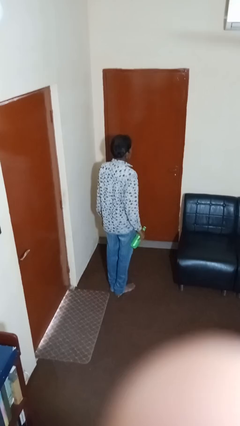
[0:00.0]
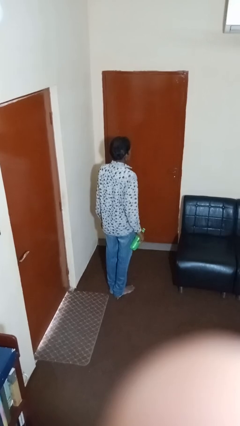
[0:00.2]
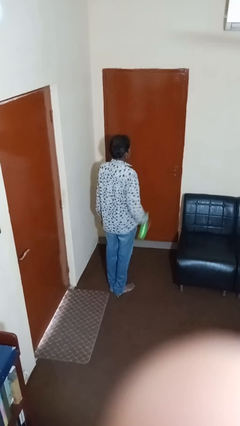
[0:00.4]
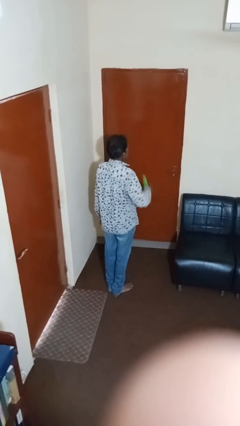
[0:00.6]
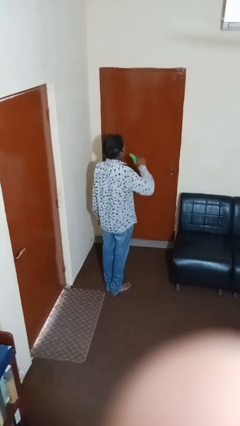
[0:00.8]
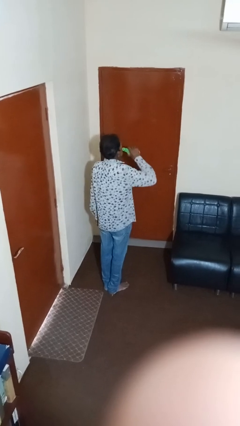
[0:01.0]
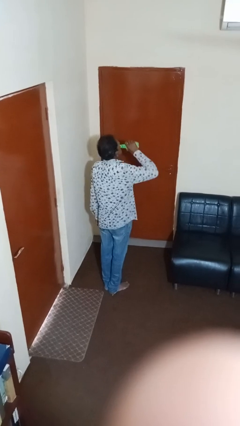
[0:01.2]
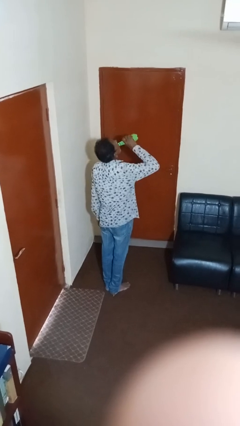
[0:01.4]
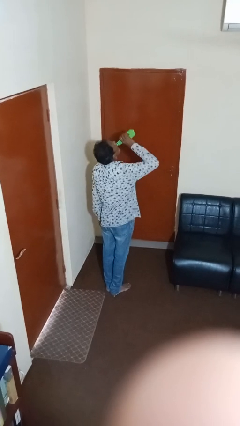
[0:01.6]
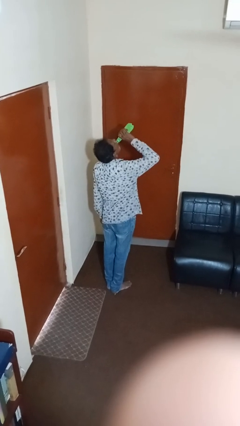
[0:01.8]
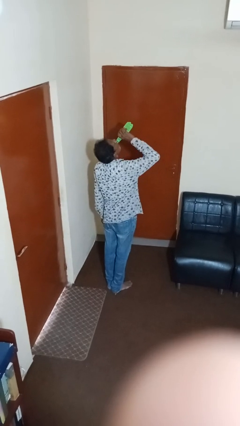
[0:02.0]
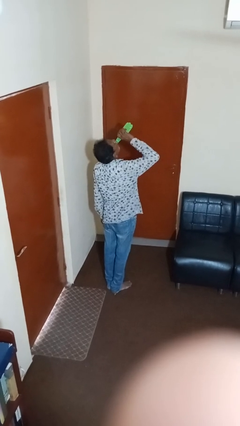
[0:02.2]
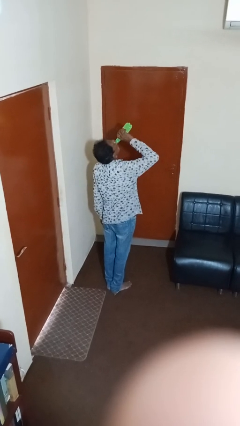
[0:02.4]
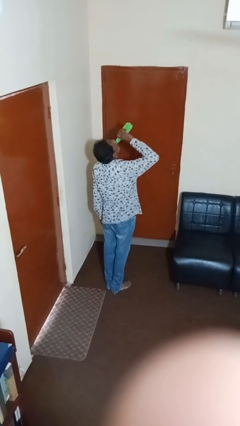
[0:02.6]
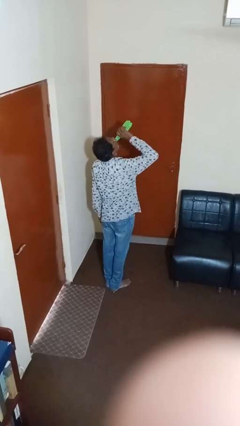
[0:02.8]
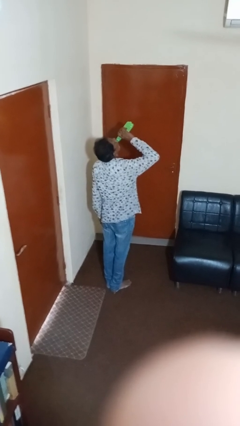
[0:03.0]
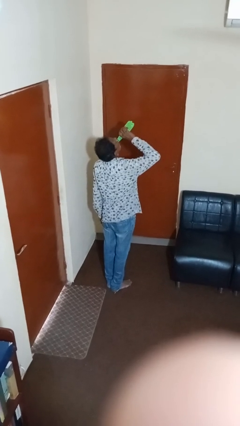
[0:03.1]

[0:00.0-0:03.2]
person drinks from bottle

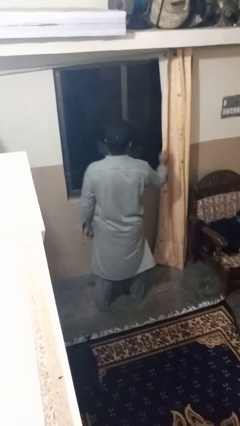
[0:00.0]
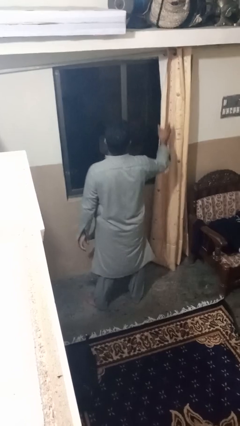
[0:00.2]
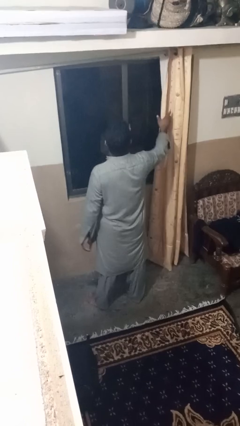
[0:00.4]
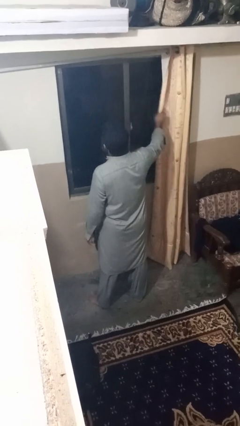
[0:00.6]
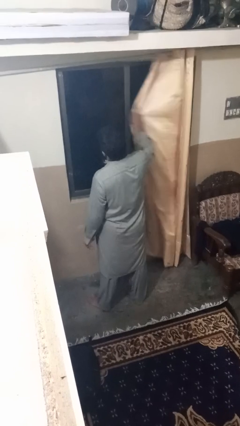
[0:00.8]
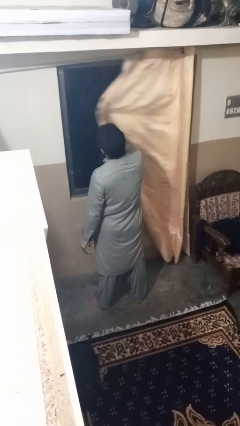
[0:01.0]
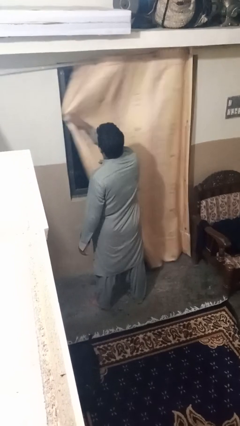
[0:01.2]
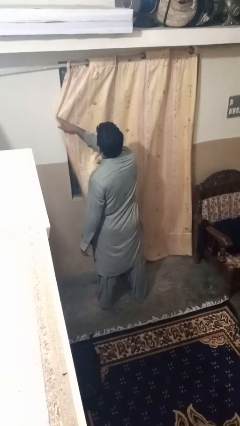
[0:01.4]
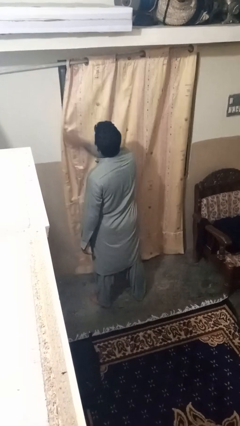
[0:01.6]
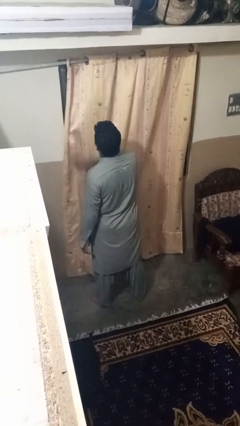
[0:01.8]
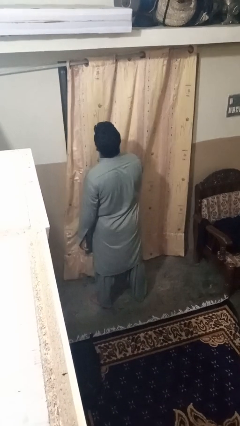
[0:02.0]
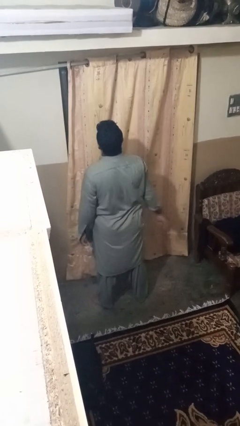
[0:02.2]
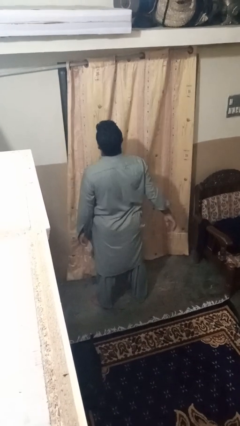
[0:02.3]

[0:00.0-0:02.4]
person closes curtains

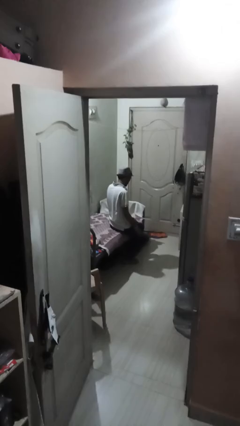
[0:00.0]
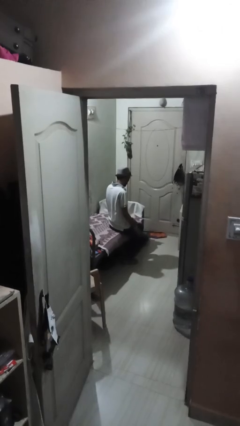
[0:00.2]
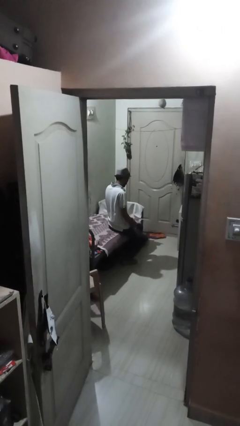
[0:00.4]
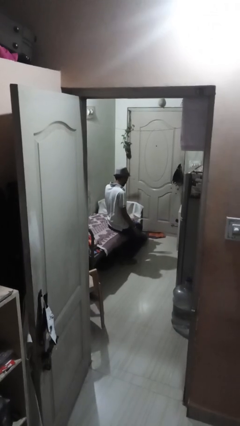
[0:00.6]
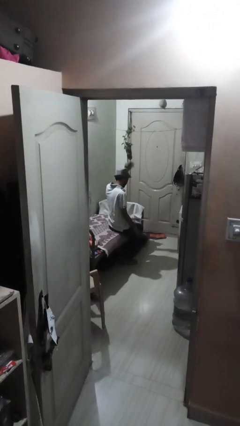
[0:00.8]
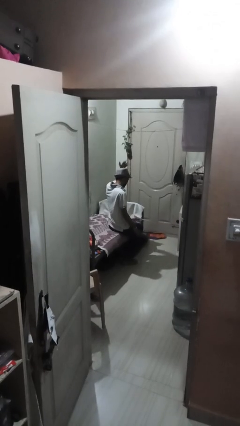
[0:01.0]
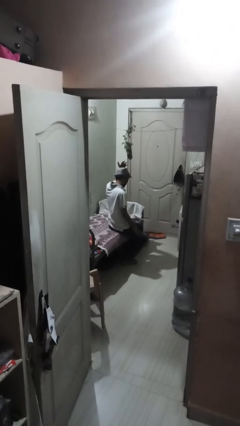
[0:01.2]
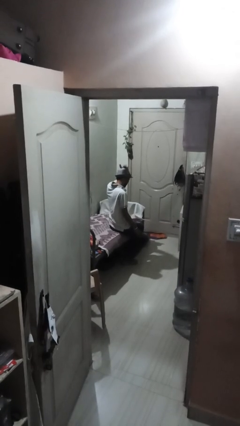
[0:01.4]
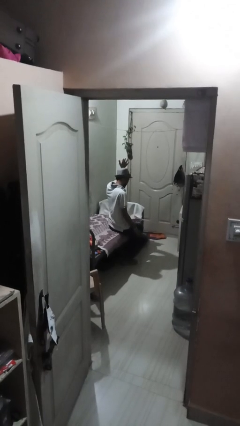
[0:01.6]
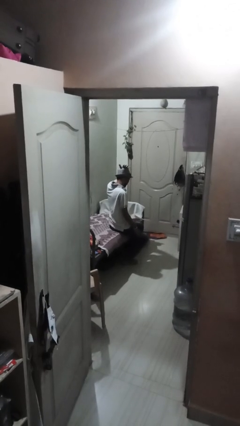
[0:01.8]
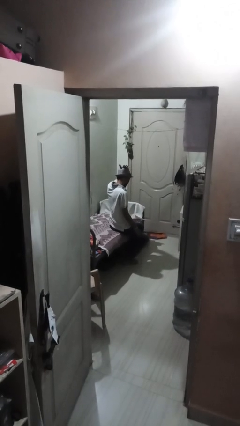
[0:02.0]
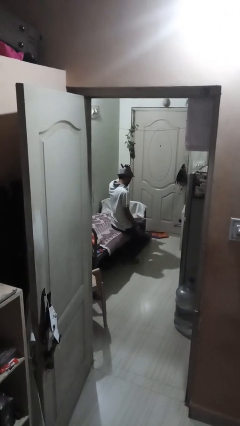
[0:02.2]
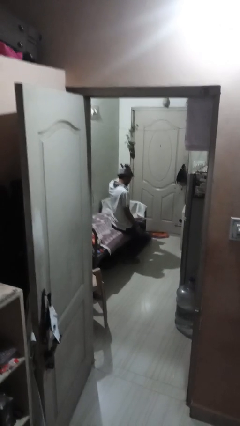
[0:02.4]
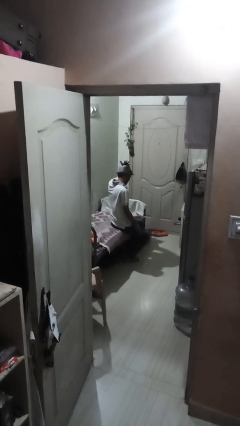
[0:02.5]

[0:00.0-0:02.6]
person pats head

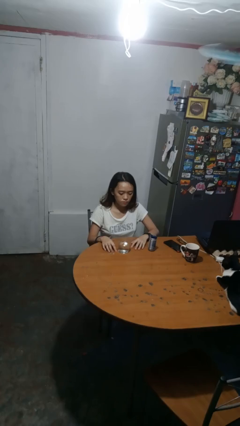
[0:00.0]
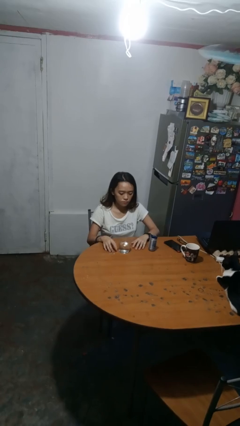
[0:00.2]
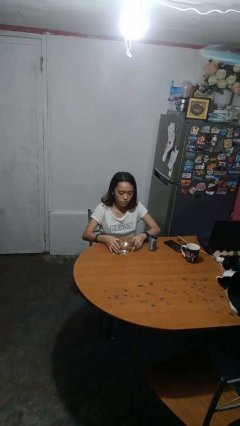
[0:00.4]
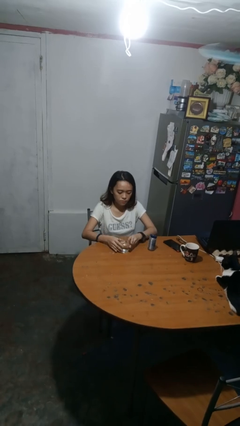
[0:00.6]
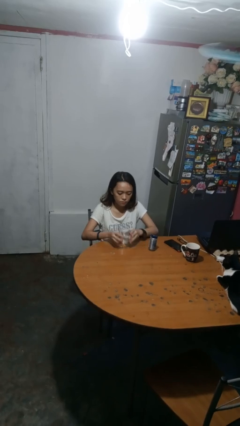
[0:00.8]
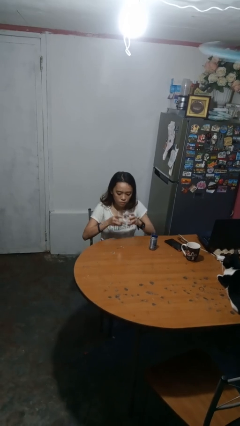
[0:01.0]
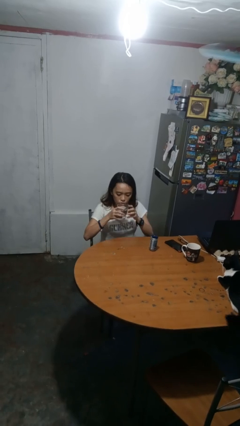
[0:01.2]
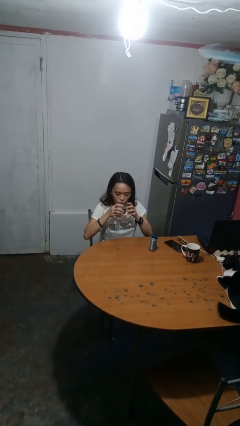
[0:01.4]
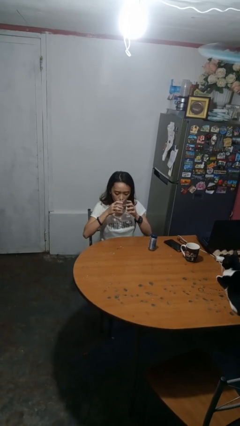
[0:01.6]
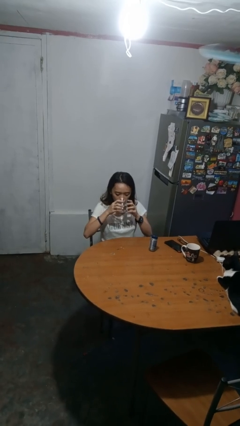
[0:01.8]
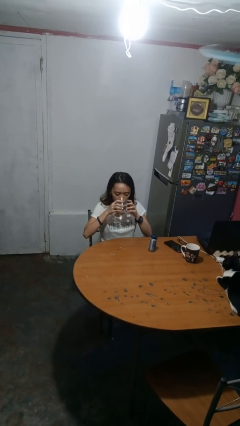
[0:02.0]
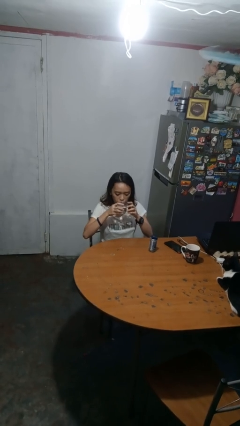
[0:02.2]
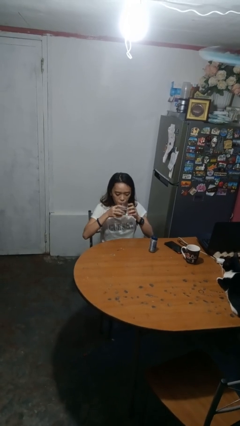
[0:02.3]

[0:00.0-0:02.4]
person drinks from cup

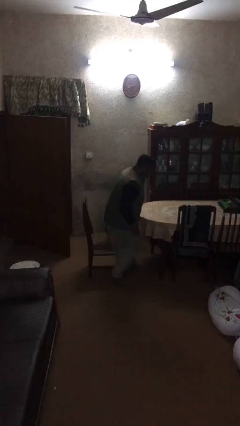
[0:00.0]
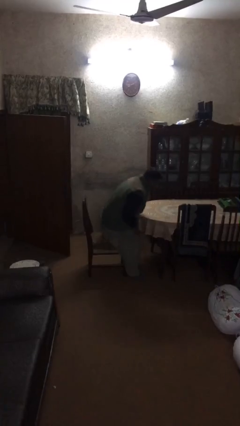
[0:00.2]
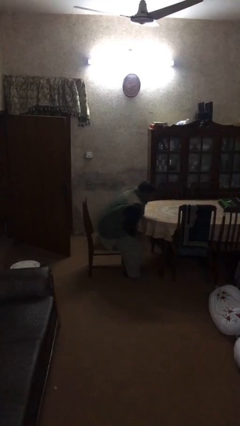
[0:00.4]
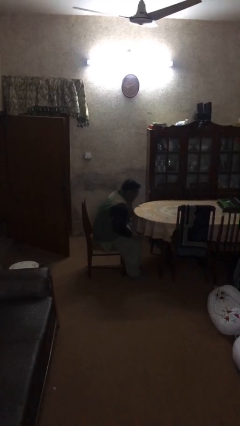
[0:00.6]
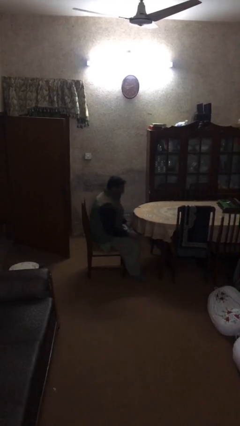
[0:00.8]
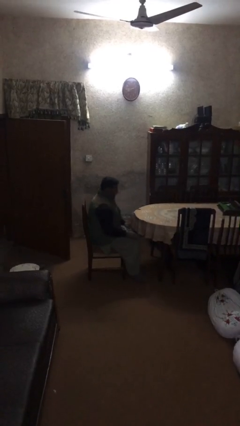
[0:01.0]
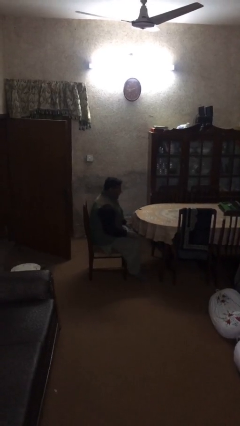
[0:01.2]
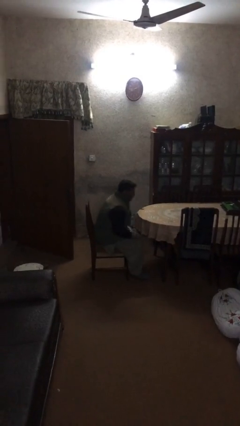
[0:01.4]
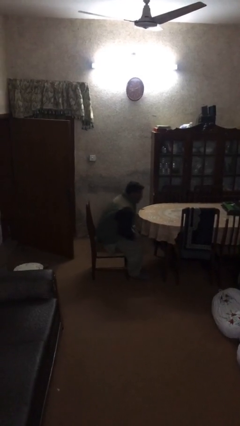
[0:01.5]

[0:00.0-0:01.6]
person sits down

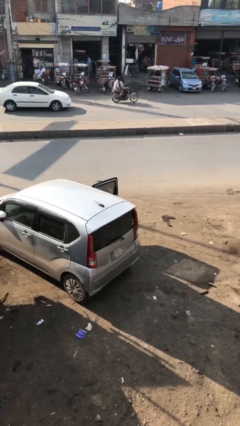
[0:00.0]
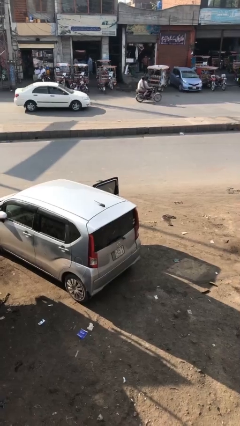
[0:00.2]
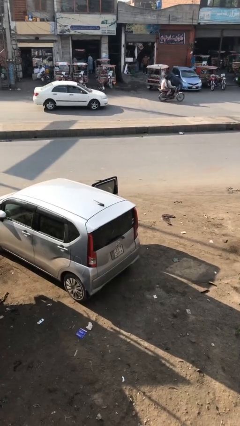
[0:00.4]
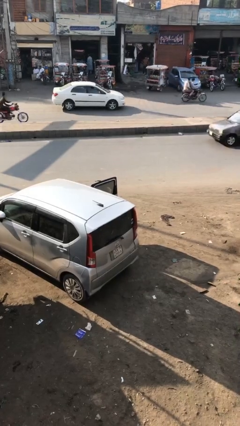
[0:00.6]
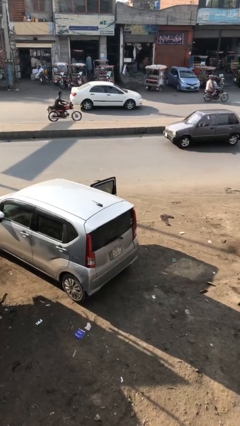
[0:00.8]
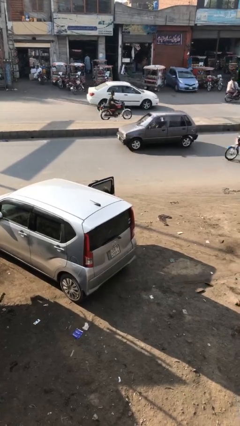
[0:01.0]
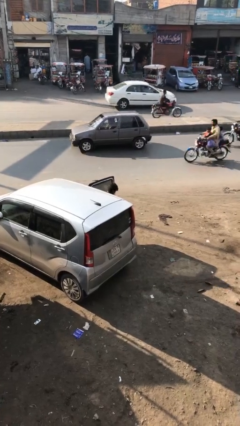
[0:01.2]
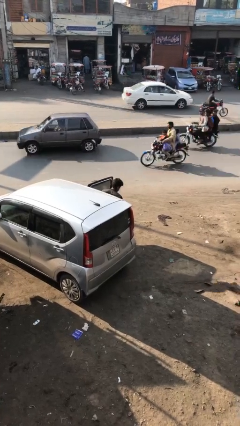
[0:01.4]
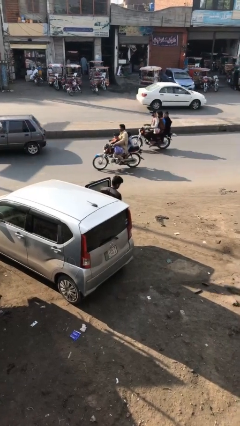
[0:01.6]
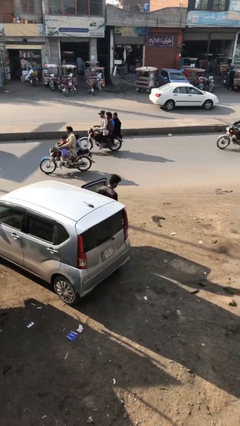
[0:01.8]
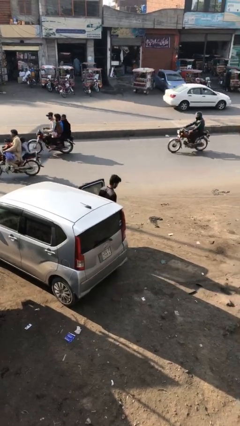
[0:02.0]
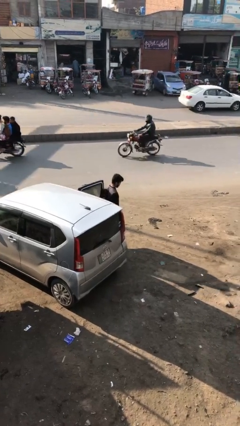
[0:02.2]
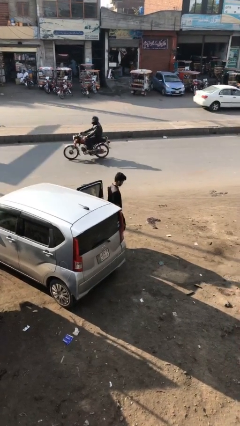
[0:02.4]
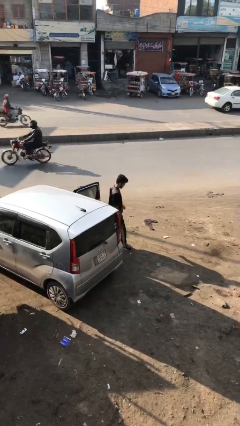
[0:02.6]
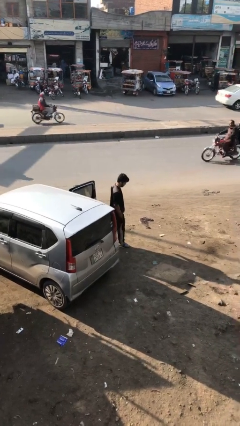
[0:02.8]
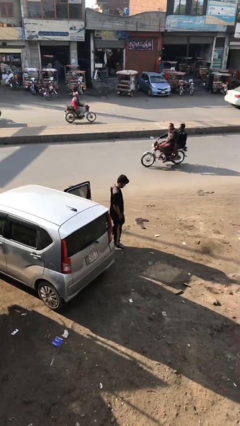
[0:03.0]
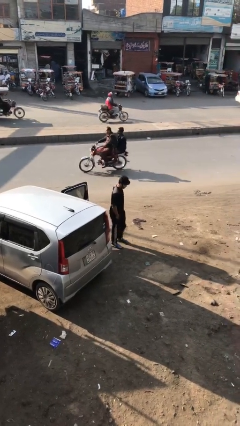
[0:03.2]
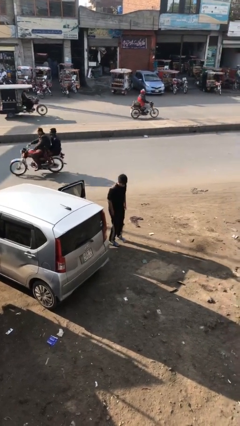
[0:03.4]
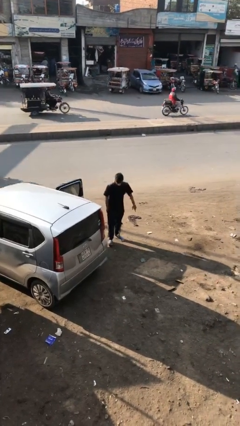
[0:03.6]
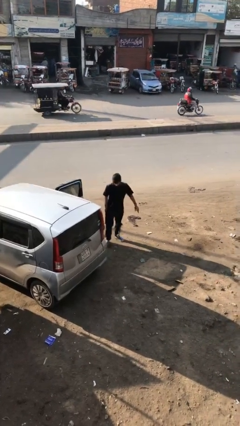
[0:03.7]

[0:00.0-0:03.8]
person exits car

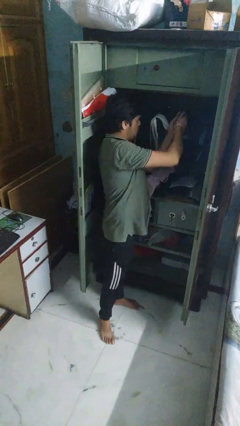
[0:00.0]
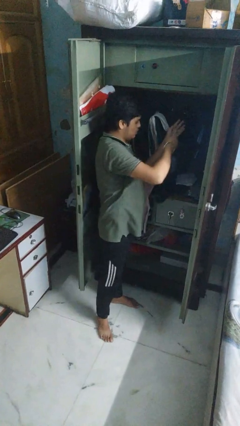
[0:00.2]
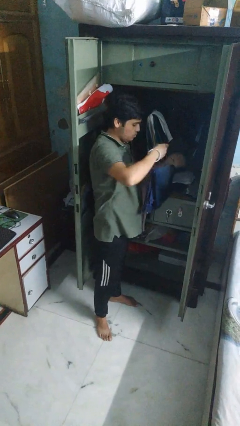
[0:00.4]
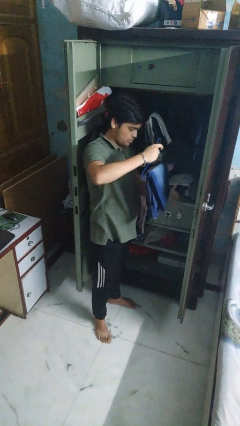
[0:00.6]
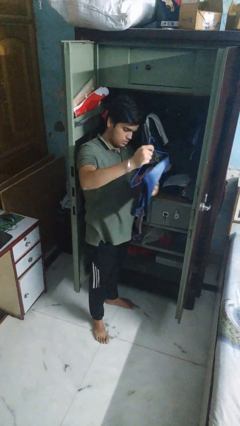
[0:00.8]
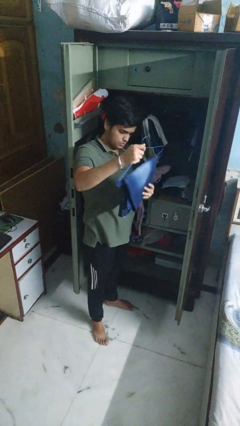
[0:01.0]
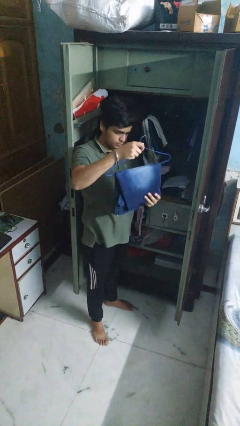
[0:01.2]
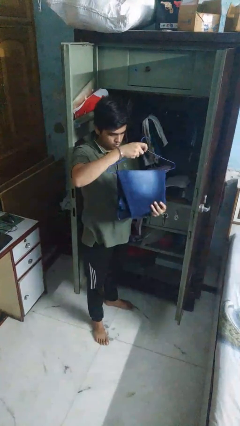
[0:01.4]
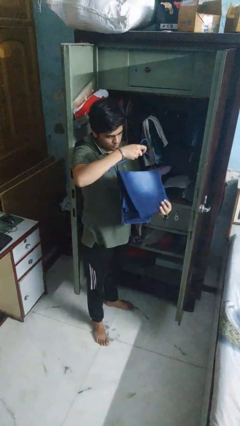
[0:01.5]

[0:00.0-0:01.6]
person takes clothes from closet
